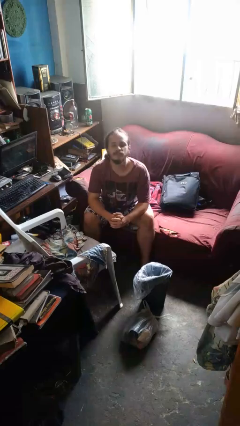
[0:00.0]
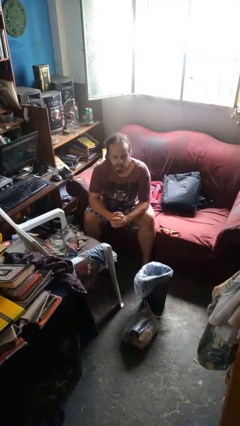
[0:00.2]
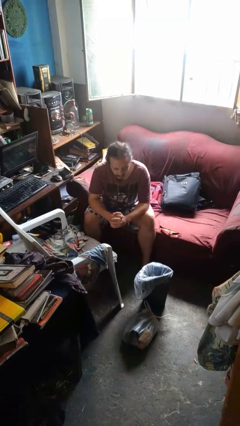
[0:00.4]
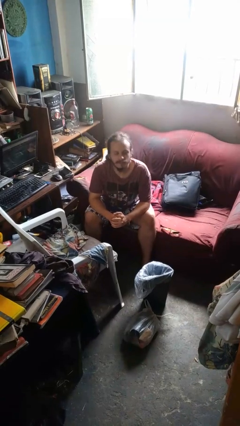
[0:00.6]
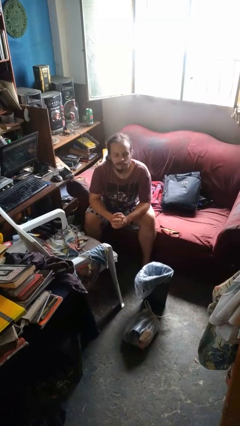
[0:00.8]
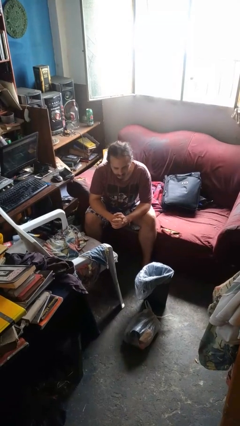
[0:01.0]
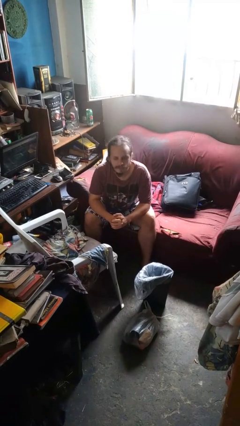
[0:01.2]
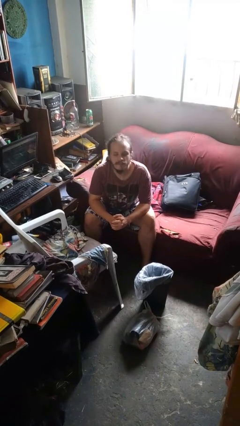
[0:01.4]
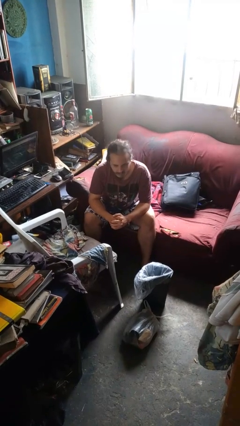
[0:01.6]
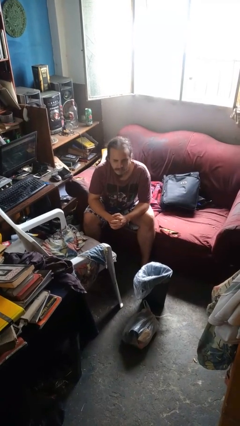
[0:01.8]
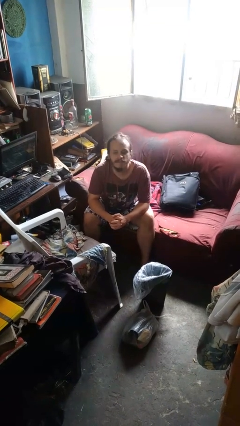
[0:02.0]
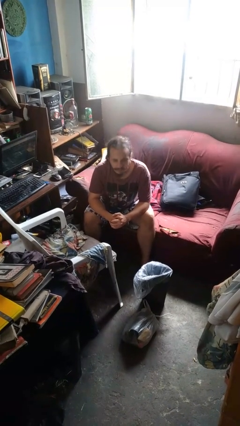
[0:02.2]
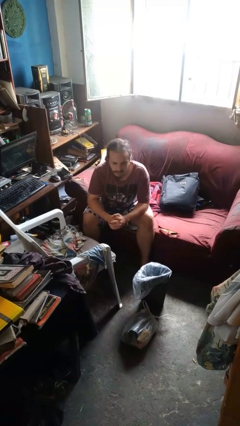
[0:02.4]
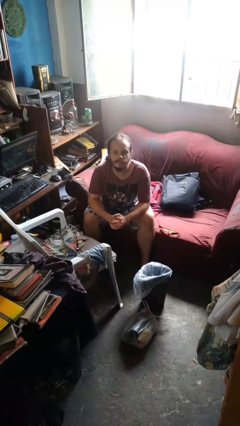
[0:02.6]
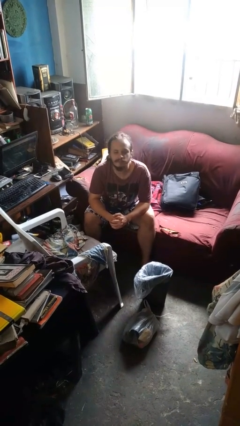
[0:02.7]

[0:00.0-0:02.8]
person nods head

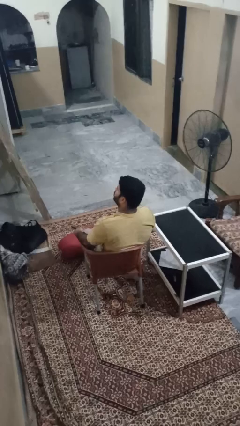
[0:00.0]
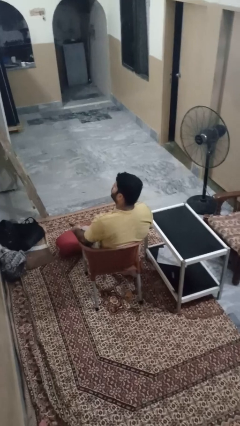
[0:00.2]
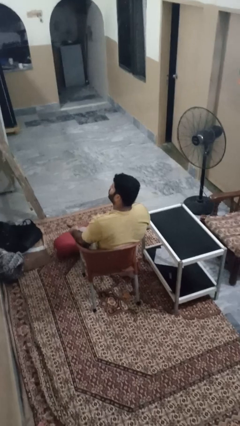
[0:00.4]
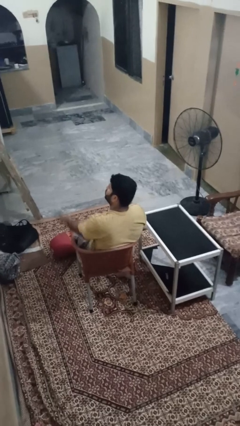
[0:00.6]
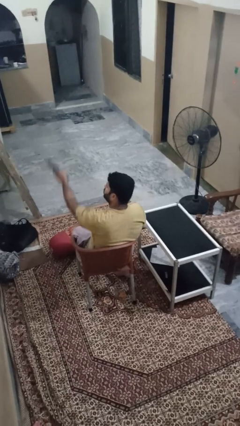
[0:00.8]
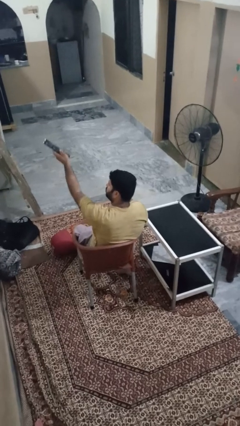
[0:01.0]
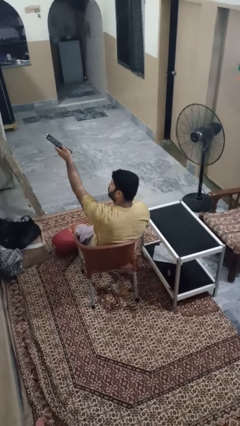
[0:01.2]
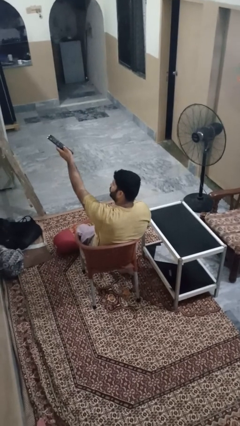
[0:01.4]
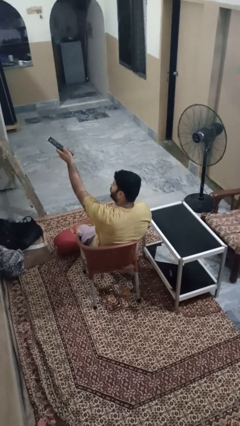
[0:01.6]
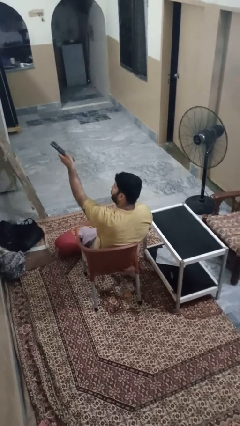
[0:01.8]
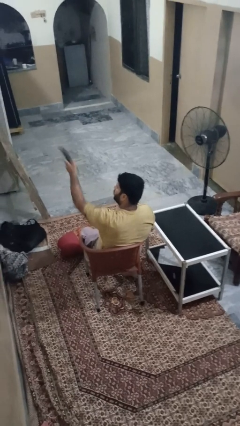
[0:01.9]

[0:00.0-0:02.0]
person uses television remote

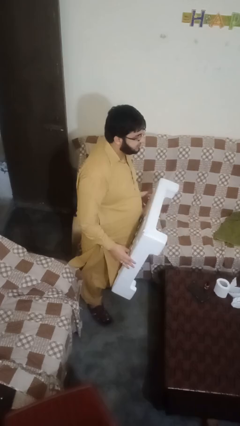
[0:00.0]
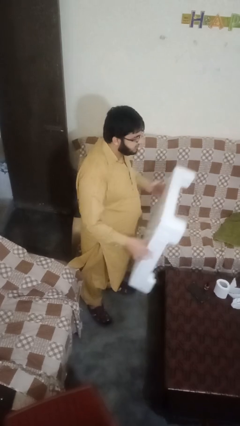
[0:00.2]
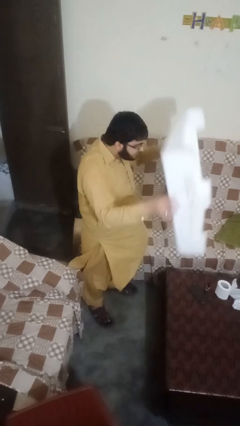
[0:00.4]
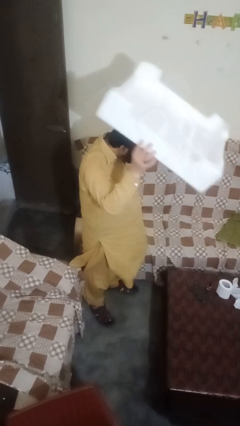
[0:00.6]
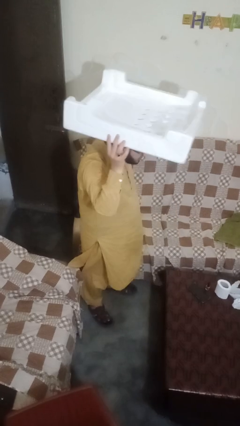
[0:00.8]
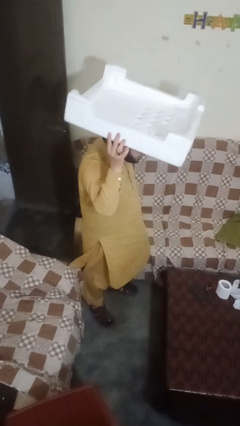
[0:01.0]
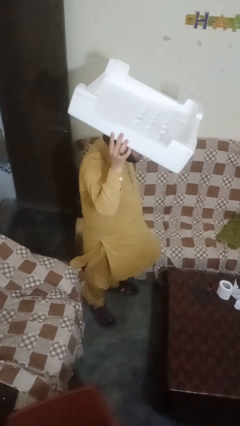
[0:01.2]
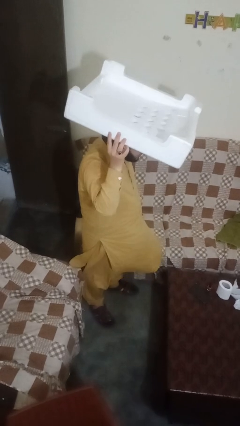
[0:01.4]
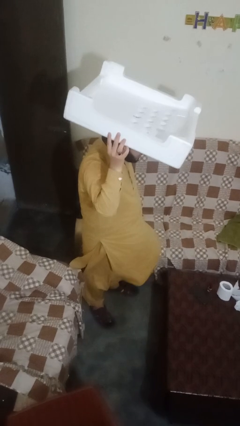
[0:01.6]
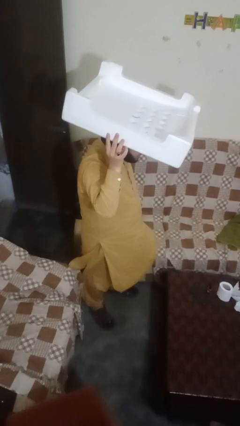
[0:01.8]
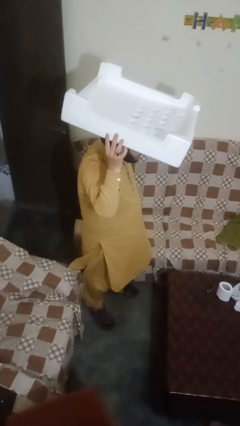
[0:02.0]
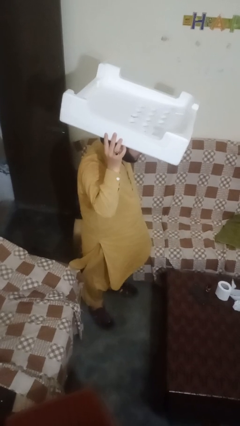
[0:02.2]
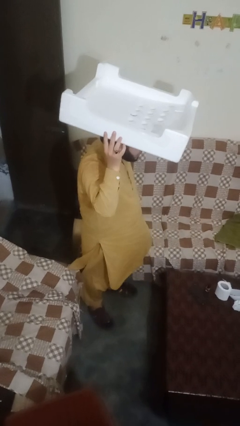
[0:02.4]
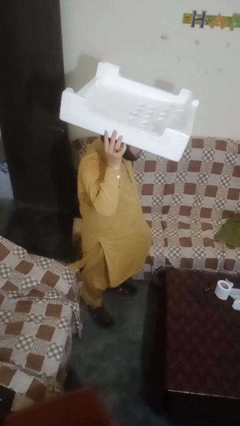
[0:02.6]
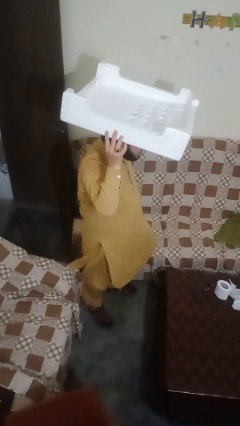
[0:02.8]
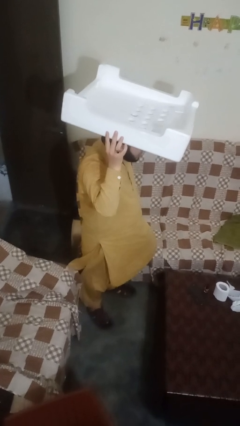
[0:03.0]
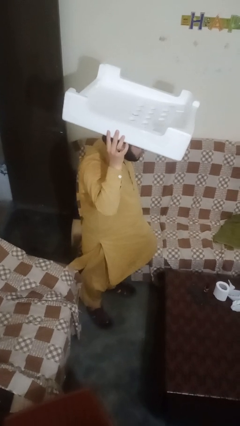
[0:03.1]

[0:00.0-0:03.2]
person holds object above head

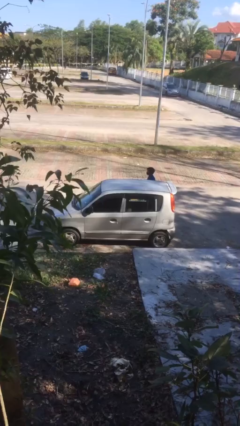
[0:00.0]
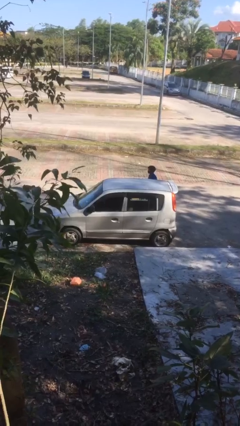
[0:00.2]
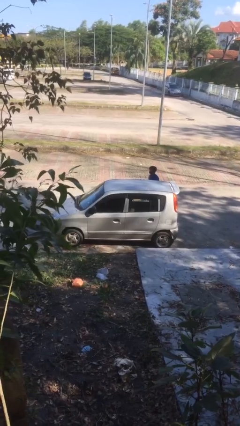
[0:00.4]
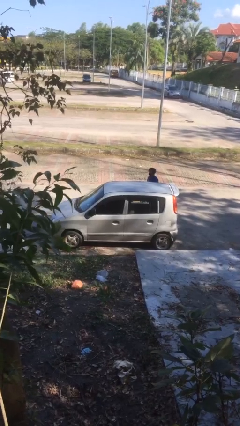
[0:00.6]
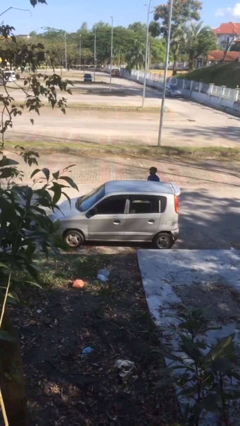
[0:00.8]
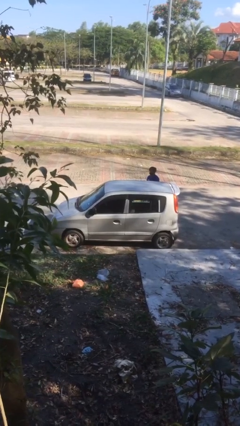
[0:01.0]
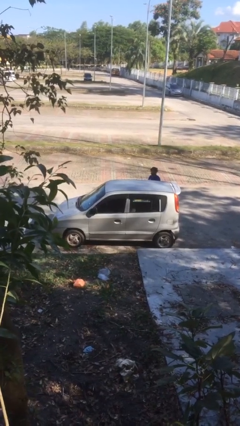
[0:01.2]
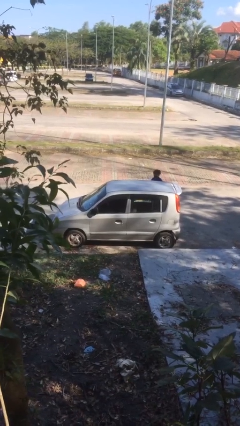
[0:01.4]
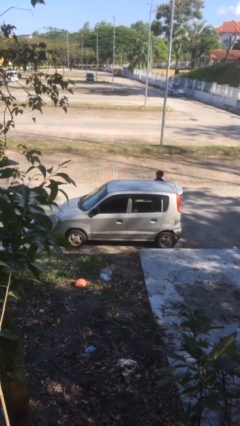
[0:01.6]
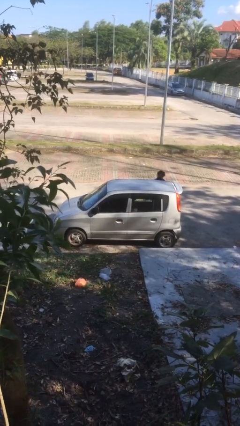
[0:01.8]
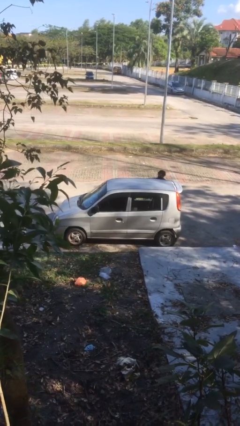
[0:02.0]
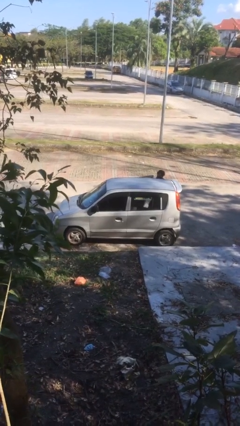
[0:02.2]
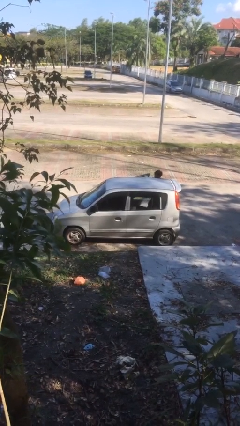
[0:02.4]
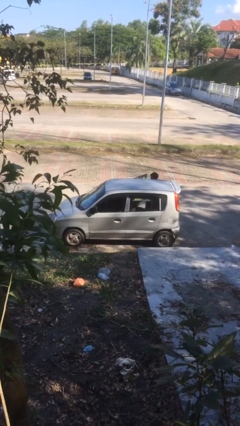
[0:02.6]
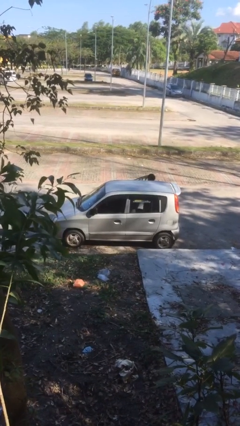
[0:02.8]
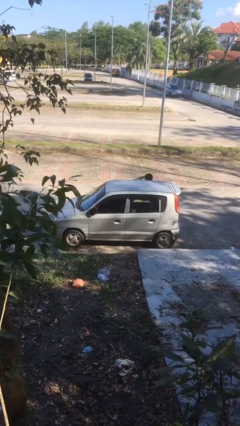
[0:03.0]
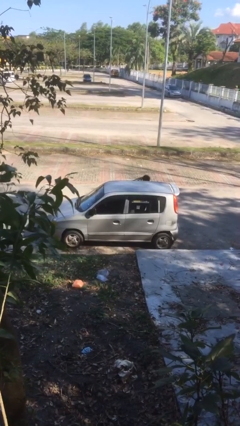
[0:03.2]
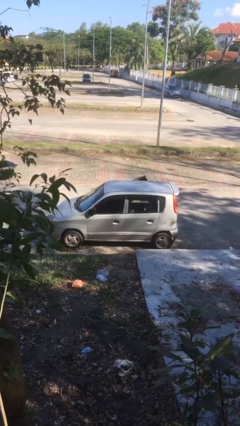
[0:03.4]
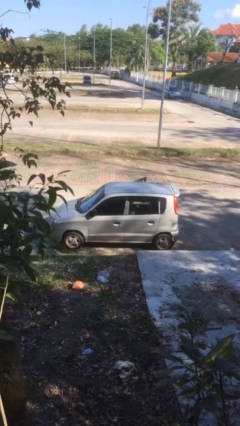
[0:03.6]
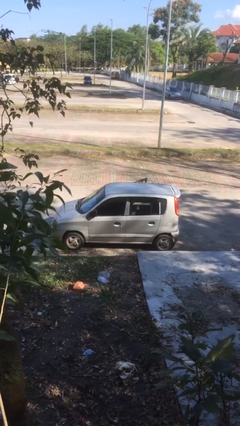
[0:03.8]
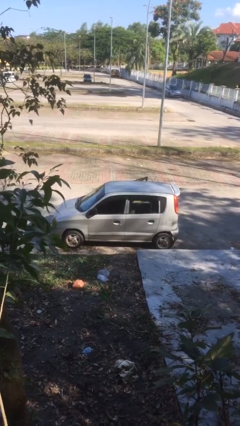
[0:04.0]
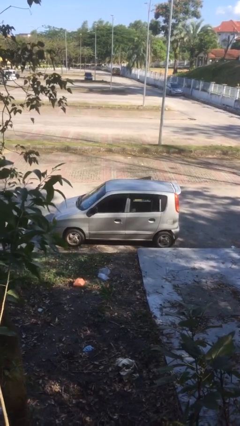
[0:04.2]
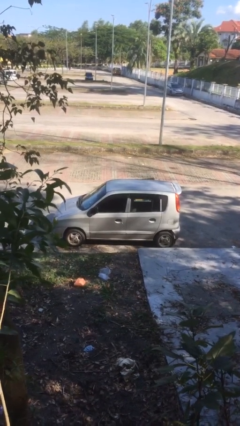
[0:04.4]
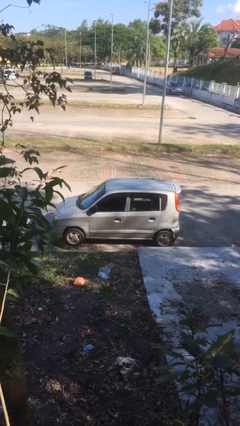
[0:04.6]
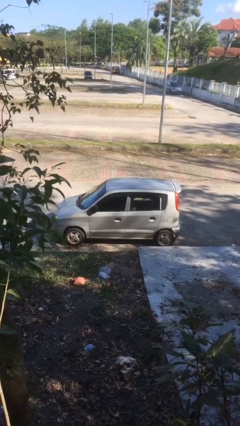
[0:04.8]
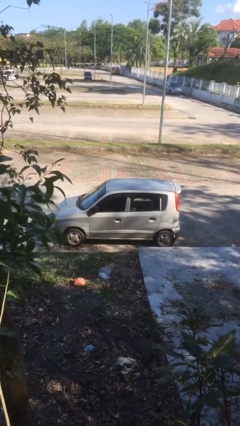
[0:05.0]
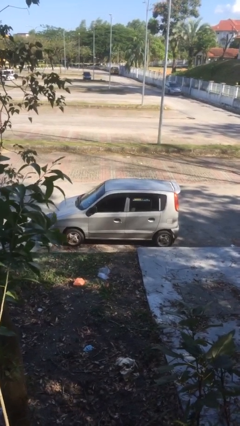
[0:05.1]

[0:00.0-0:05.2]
car picks up person

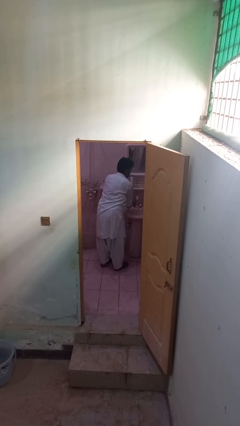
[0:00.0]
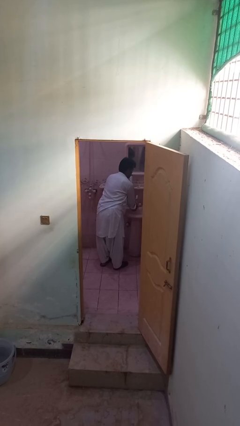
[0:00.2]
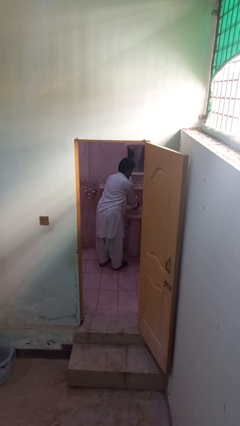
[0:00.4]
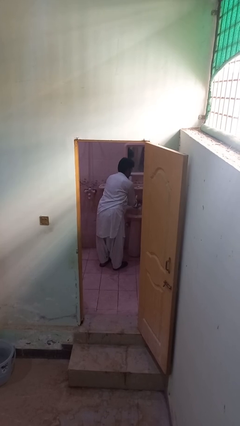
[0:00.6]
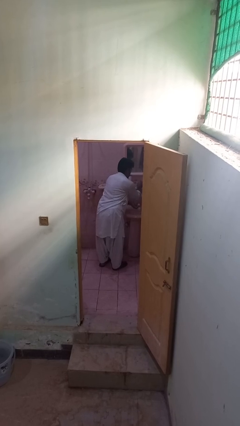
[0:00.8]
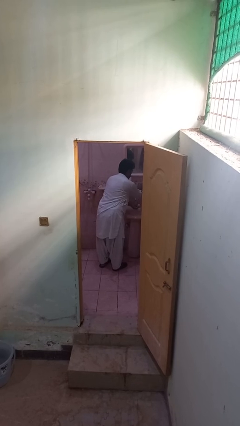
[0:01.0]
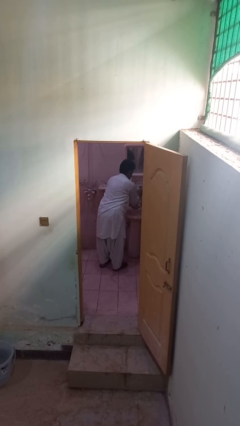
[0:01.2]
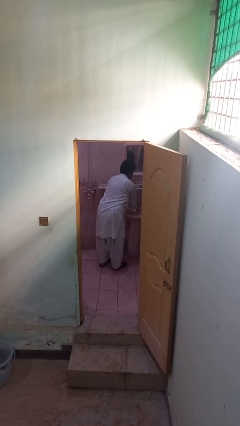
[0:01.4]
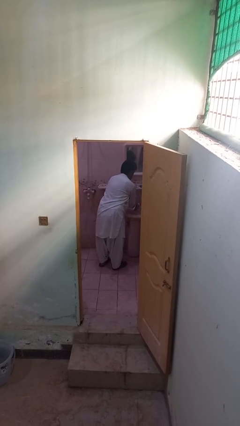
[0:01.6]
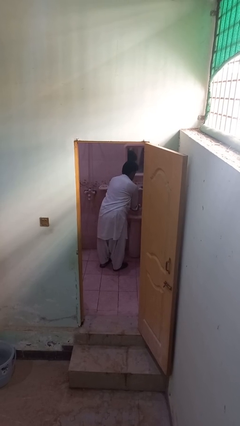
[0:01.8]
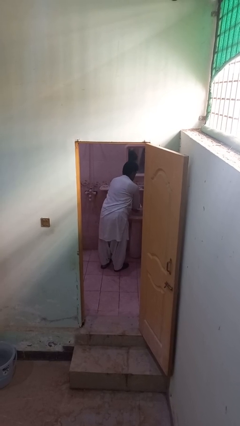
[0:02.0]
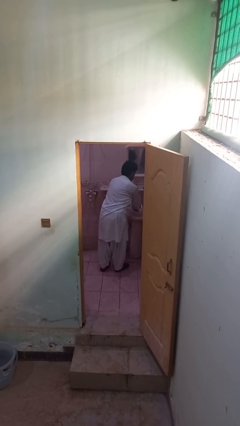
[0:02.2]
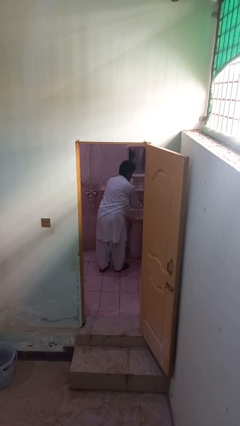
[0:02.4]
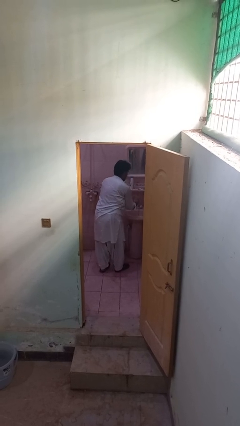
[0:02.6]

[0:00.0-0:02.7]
person washes hands

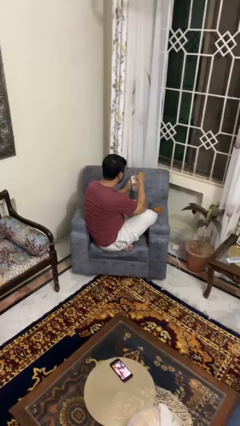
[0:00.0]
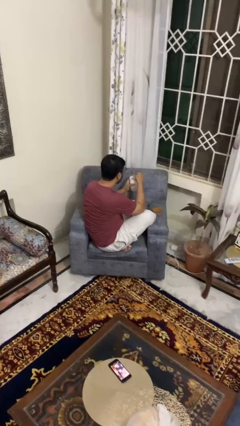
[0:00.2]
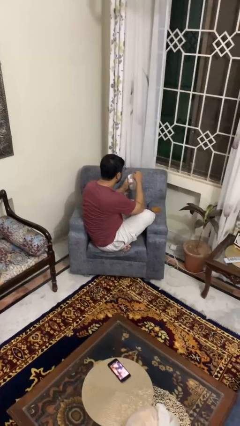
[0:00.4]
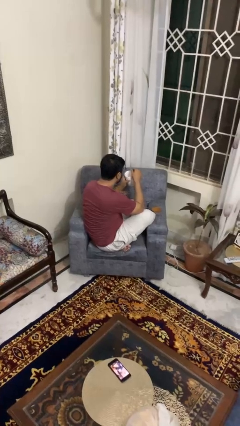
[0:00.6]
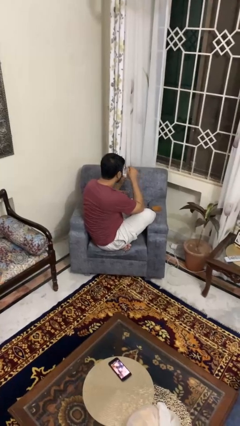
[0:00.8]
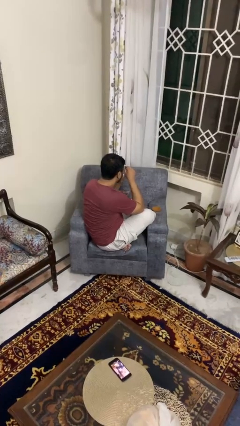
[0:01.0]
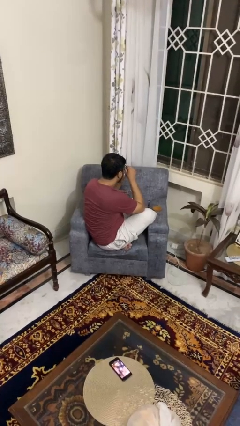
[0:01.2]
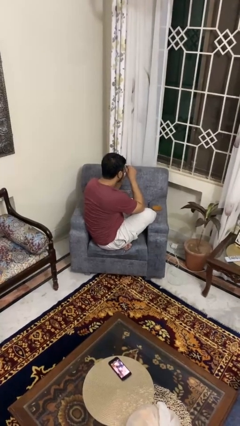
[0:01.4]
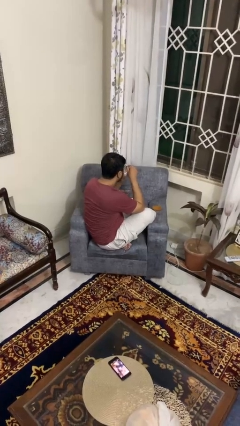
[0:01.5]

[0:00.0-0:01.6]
person drinks from mug
